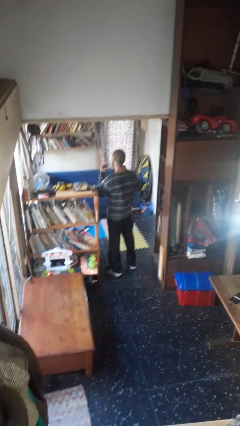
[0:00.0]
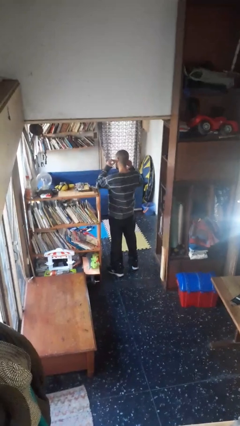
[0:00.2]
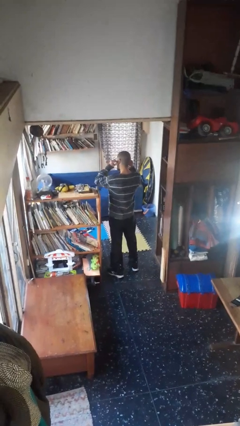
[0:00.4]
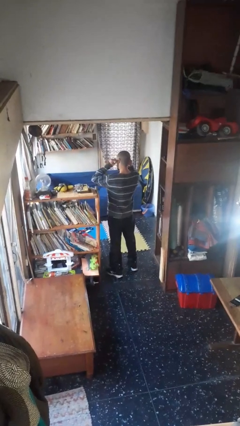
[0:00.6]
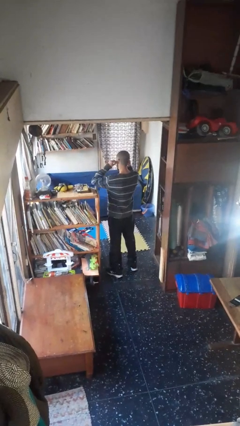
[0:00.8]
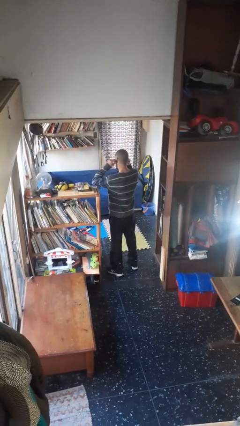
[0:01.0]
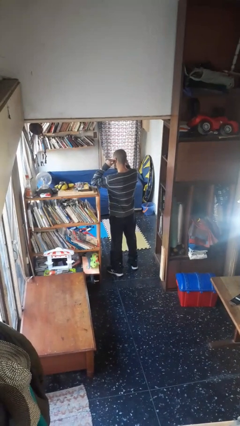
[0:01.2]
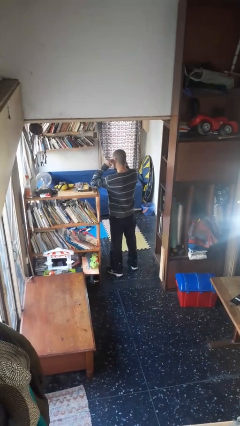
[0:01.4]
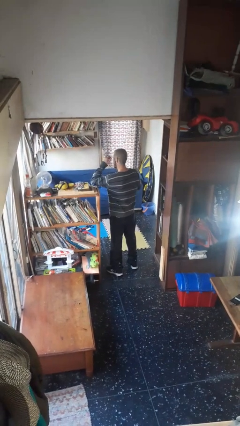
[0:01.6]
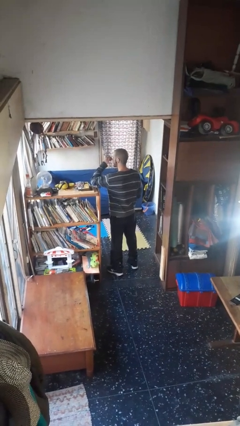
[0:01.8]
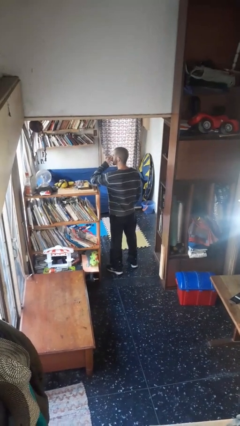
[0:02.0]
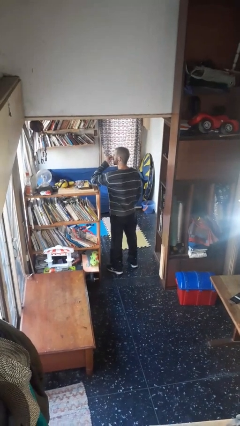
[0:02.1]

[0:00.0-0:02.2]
person puts on headphones

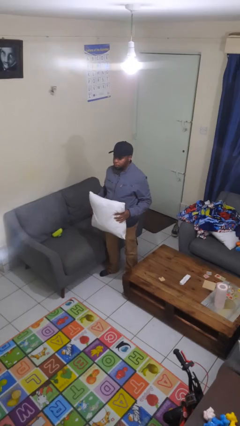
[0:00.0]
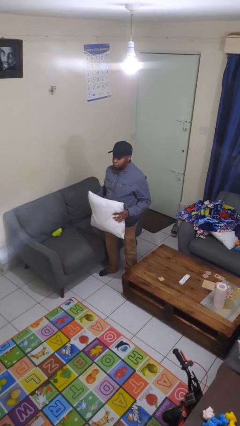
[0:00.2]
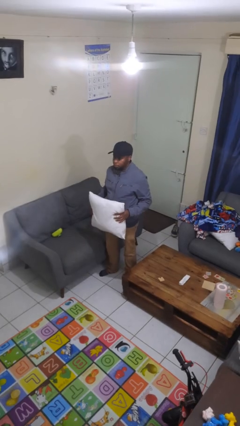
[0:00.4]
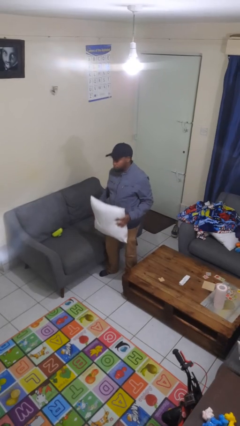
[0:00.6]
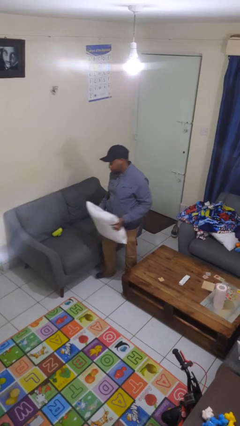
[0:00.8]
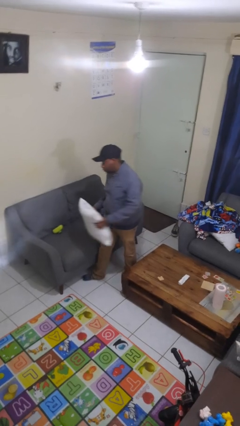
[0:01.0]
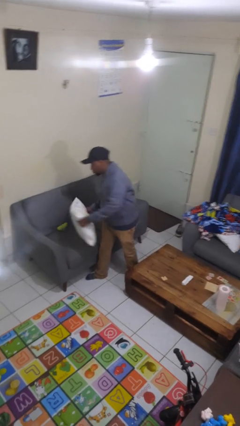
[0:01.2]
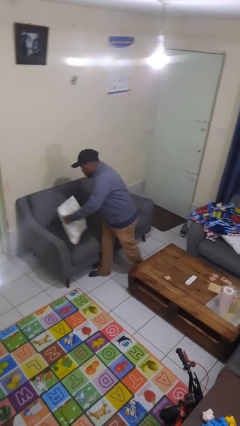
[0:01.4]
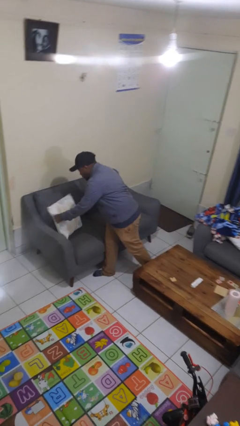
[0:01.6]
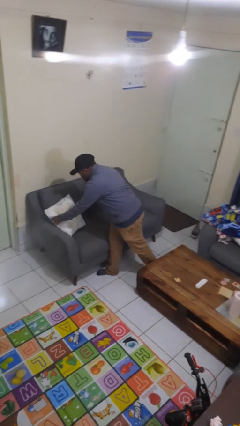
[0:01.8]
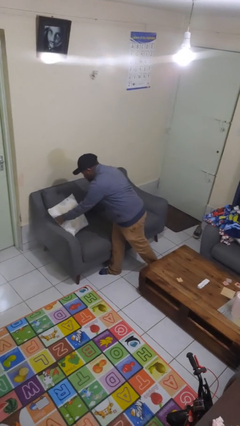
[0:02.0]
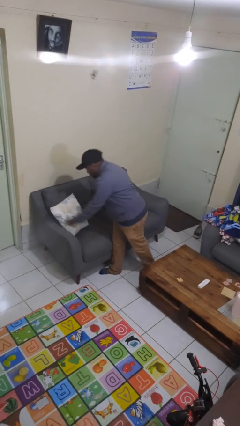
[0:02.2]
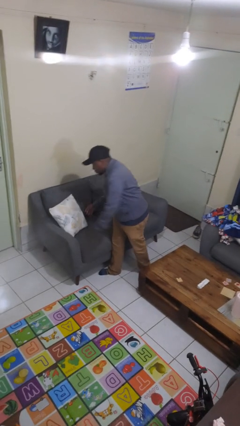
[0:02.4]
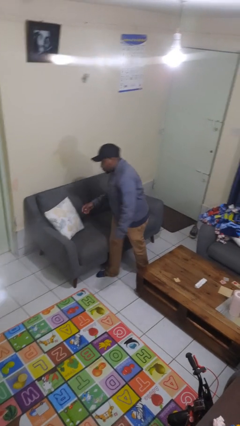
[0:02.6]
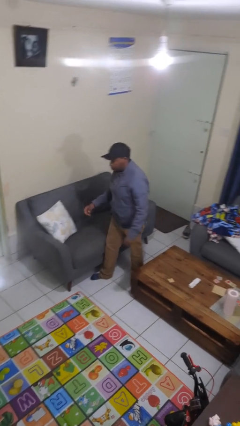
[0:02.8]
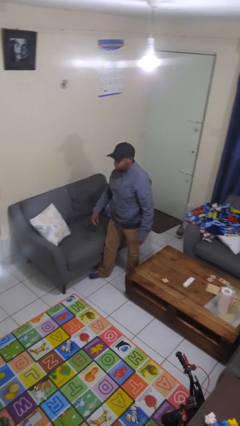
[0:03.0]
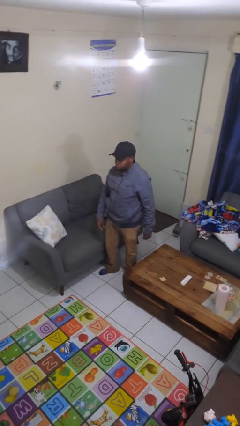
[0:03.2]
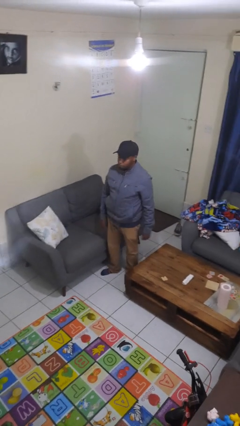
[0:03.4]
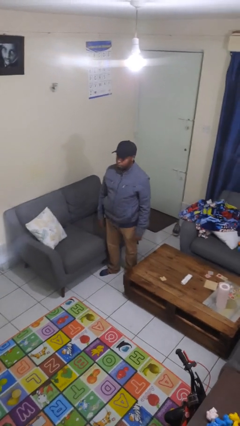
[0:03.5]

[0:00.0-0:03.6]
person puts down object on couch

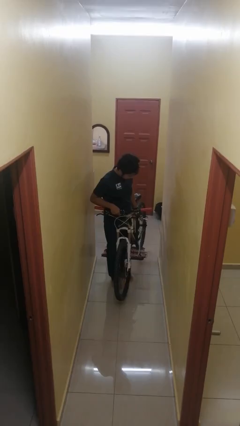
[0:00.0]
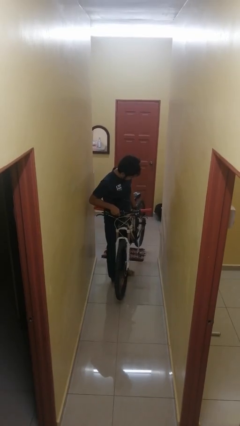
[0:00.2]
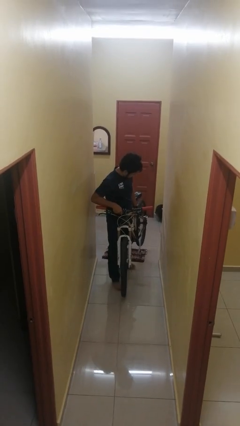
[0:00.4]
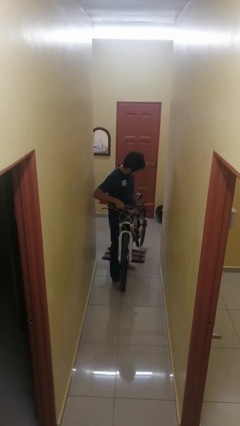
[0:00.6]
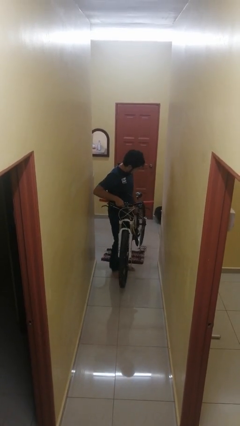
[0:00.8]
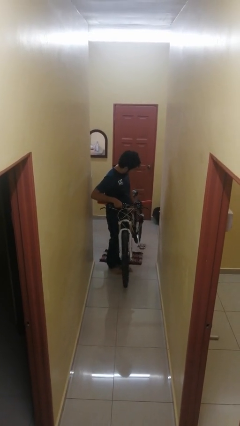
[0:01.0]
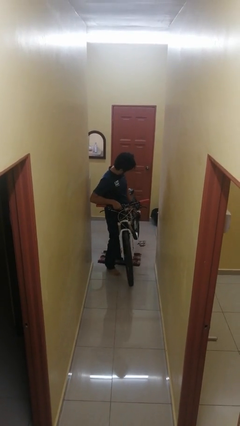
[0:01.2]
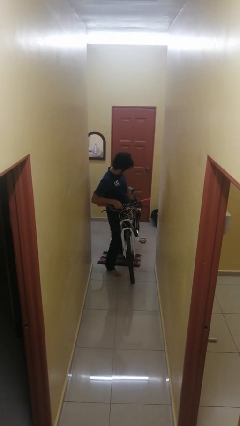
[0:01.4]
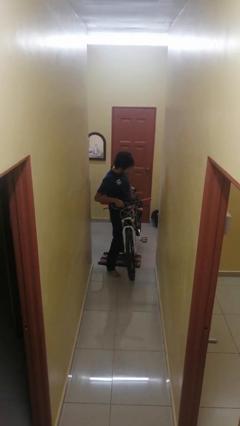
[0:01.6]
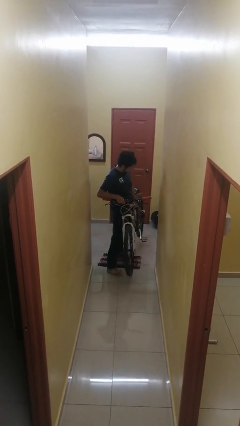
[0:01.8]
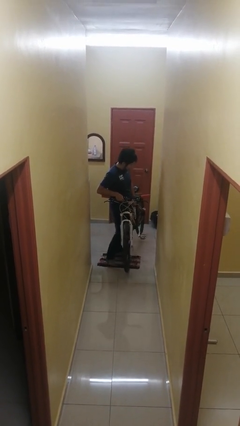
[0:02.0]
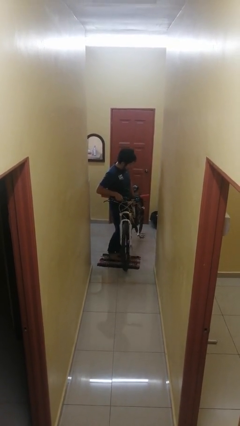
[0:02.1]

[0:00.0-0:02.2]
person carries bicycle

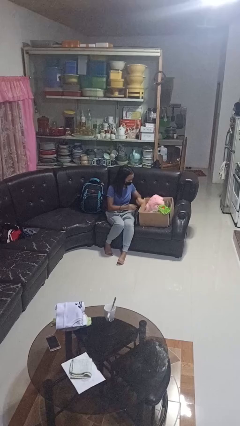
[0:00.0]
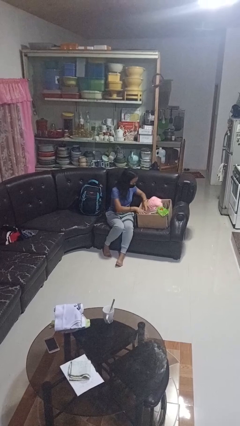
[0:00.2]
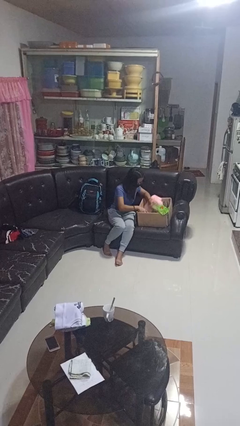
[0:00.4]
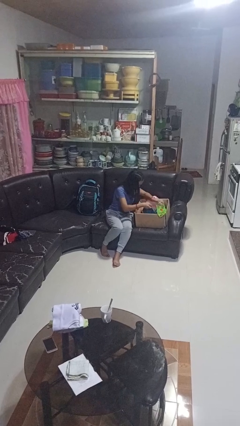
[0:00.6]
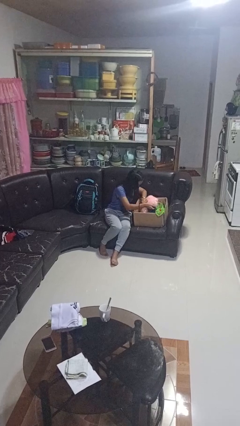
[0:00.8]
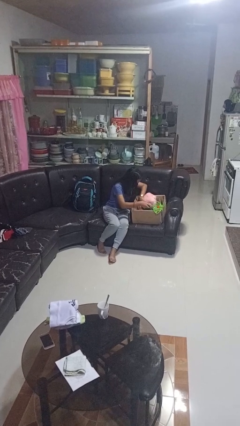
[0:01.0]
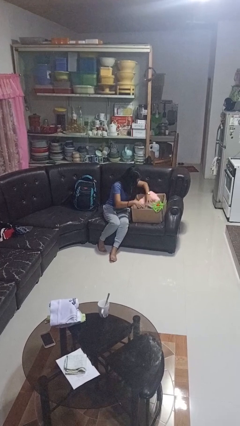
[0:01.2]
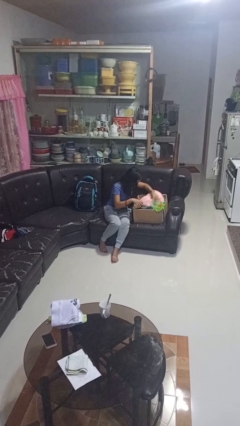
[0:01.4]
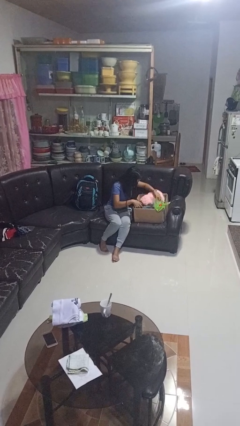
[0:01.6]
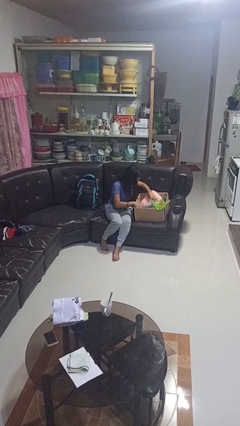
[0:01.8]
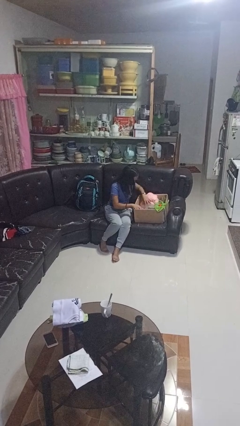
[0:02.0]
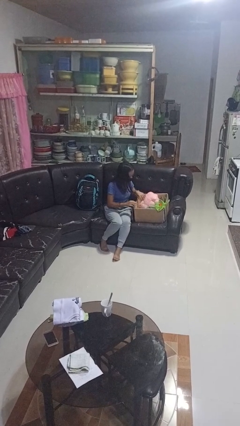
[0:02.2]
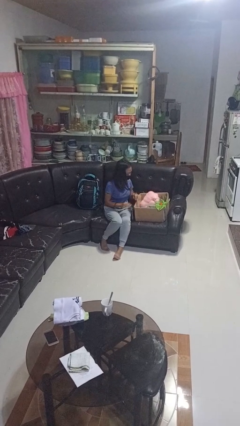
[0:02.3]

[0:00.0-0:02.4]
person searches in box

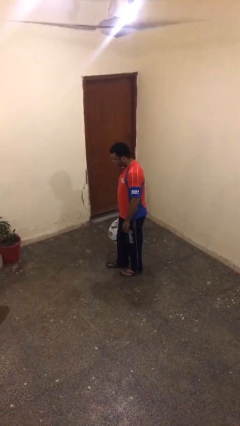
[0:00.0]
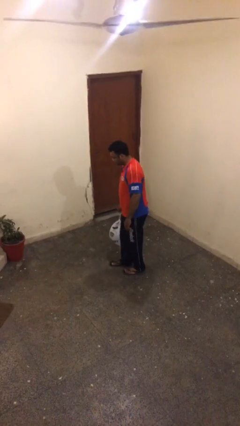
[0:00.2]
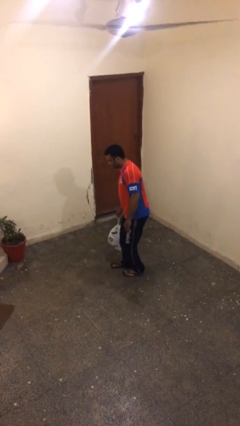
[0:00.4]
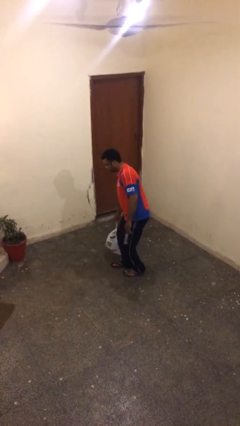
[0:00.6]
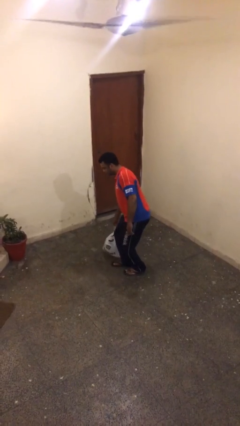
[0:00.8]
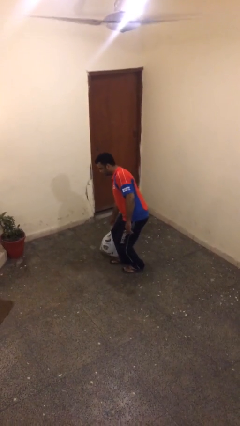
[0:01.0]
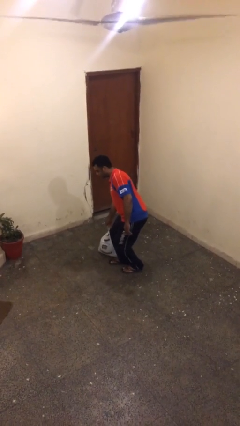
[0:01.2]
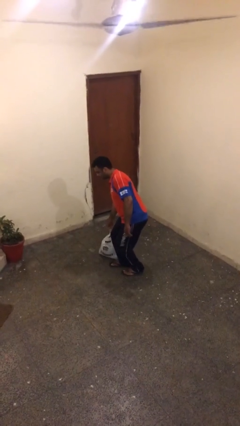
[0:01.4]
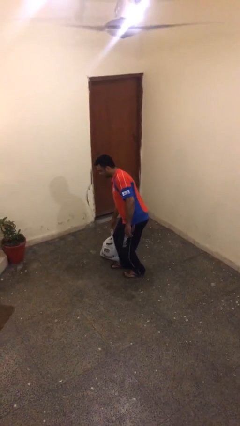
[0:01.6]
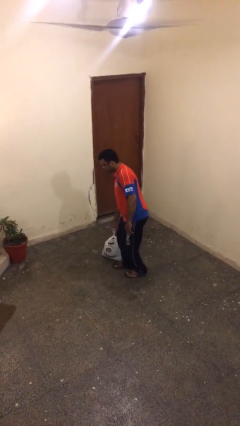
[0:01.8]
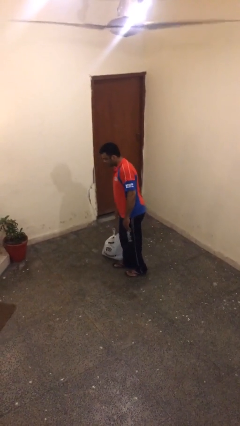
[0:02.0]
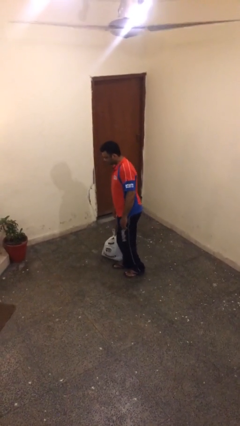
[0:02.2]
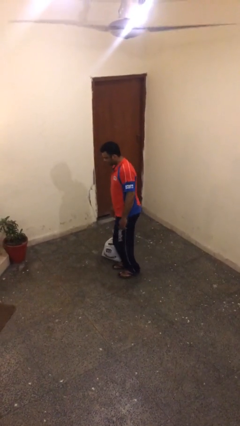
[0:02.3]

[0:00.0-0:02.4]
person puts down object on floor

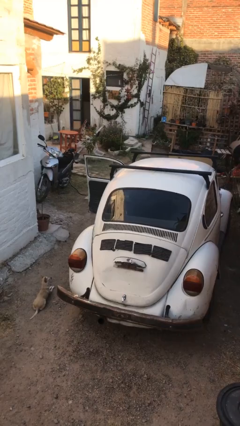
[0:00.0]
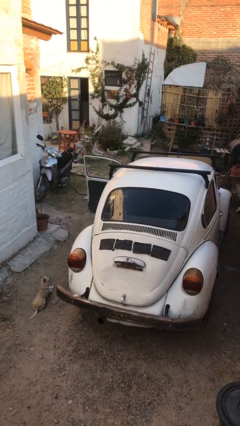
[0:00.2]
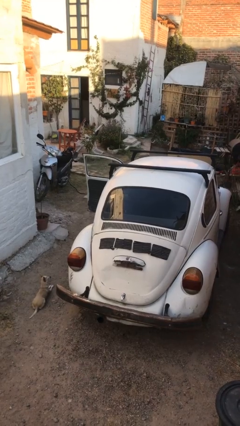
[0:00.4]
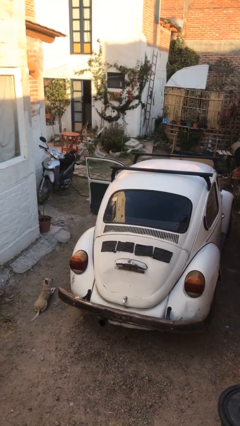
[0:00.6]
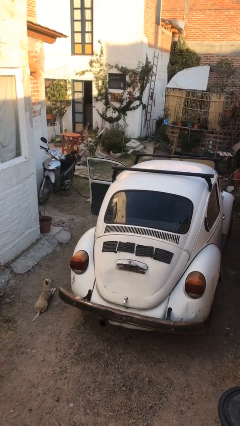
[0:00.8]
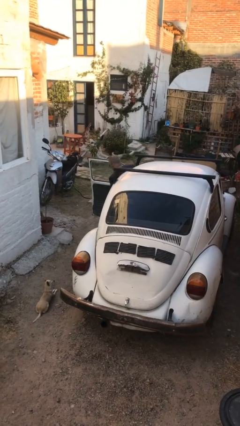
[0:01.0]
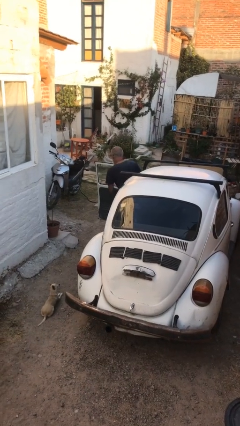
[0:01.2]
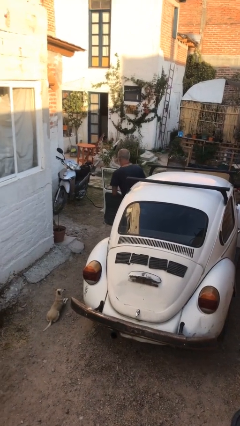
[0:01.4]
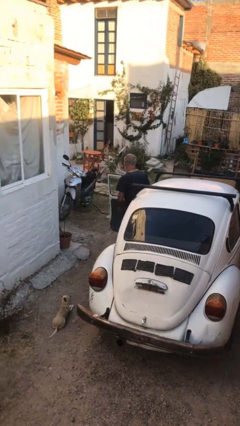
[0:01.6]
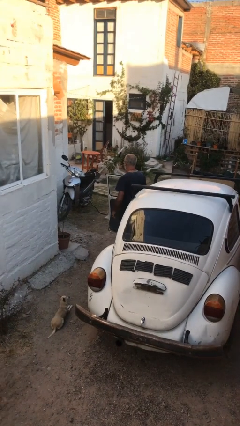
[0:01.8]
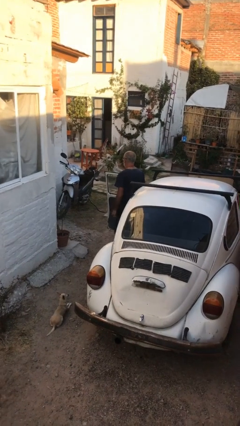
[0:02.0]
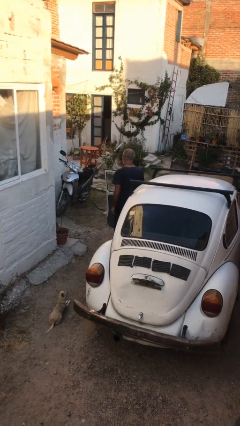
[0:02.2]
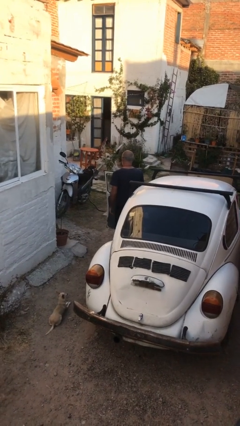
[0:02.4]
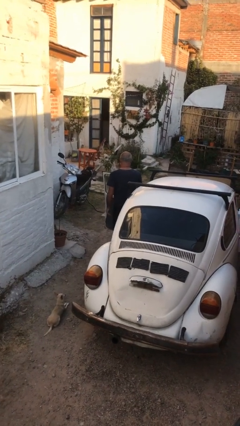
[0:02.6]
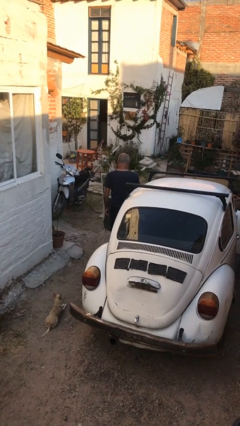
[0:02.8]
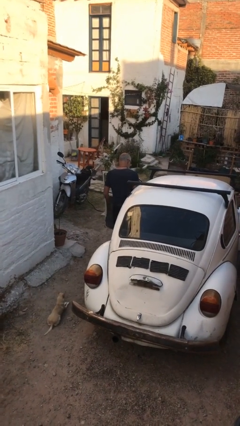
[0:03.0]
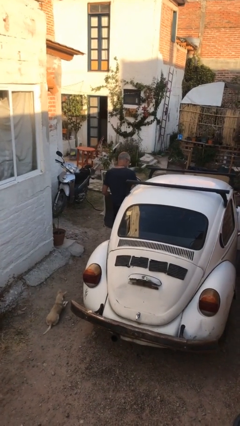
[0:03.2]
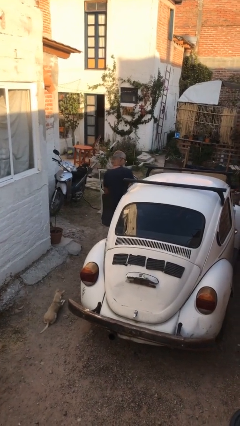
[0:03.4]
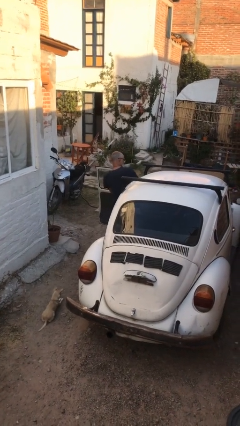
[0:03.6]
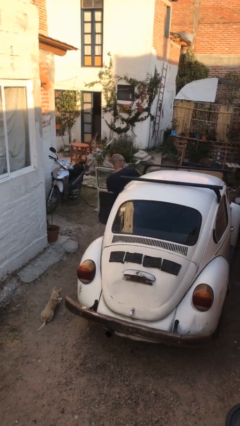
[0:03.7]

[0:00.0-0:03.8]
person exits car

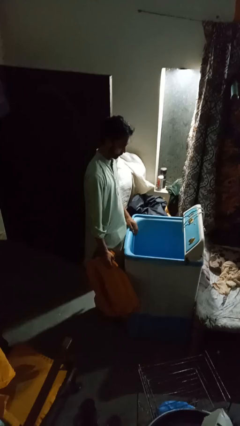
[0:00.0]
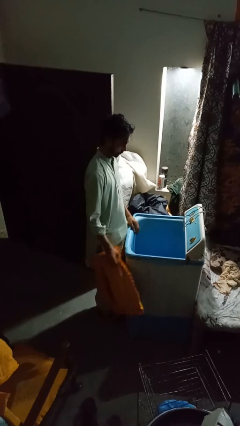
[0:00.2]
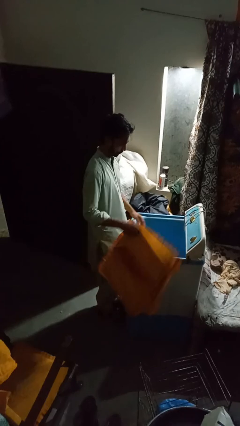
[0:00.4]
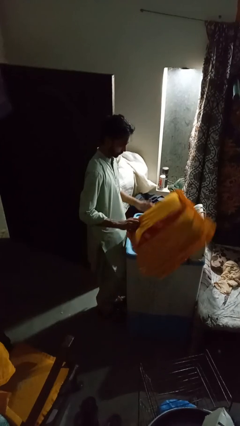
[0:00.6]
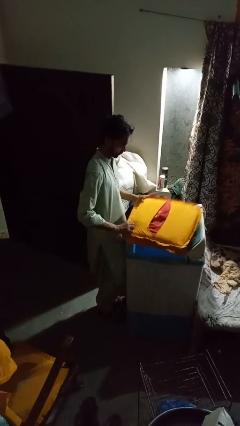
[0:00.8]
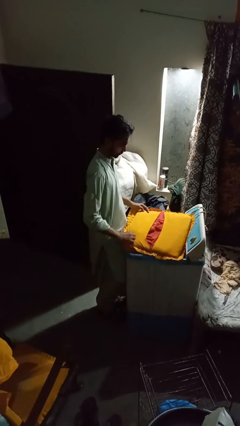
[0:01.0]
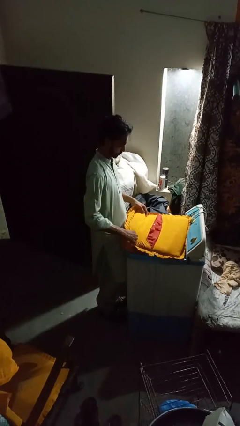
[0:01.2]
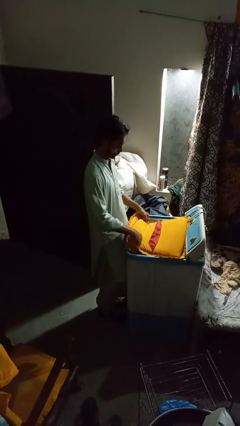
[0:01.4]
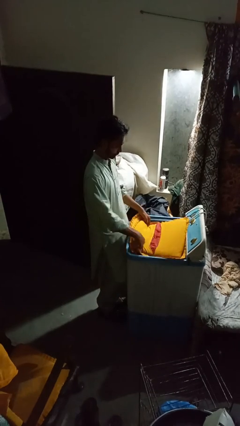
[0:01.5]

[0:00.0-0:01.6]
person loads clotheswasher
